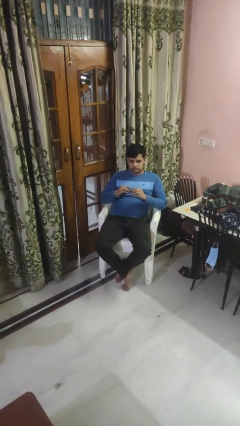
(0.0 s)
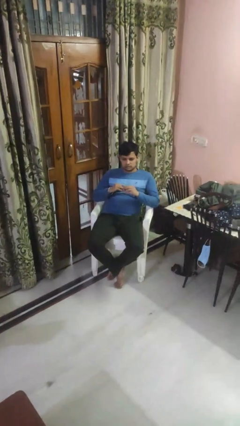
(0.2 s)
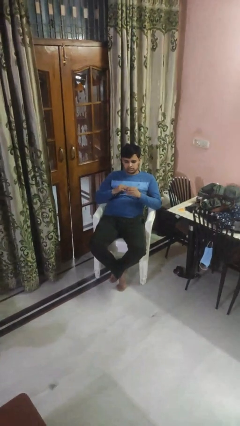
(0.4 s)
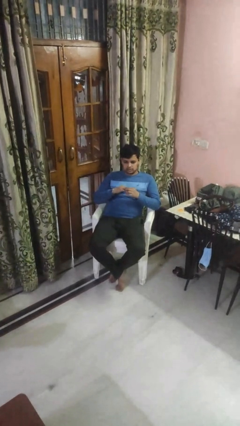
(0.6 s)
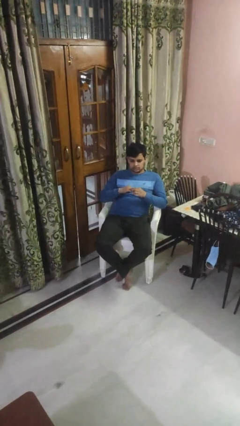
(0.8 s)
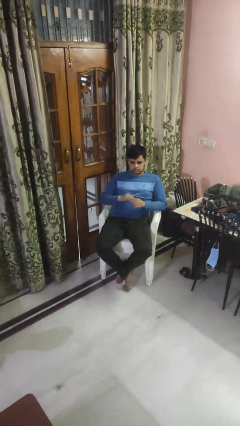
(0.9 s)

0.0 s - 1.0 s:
person puts on ring

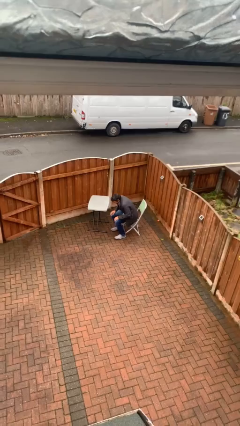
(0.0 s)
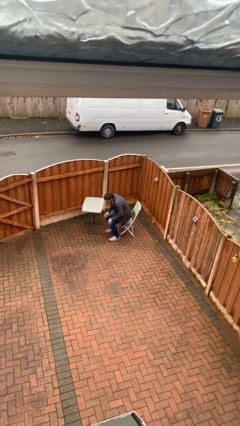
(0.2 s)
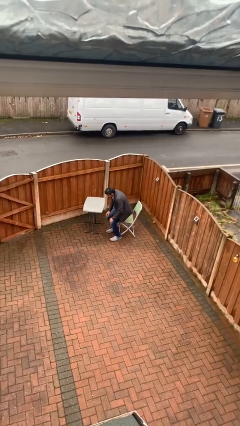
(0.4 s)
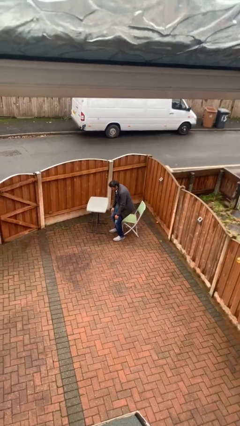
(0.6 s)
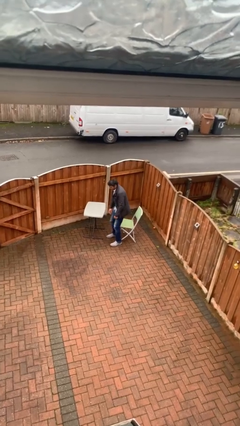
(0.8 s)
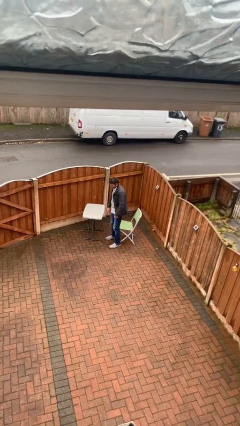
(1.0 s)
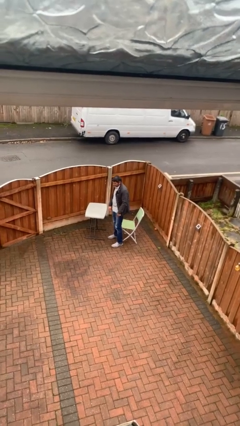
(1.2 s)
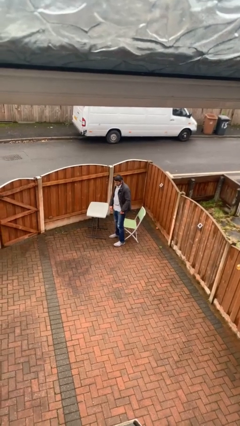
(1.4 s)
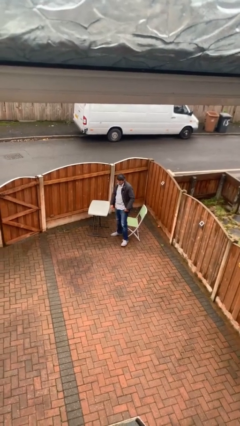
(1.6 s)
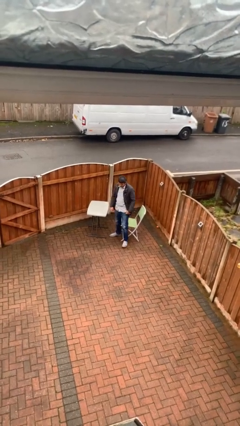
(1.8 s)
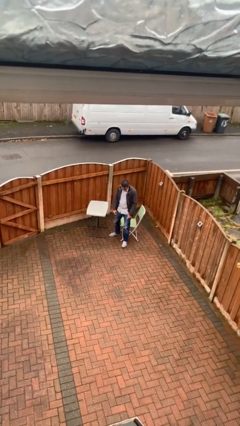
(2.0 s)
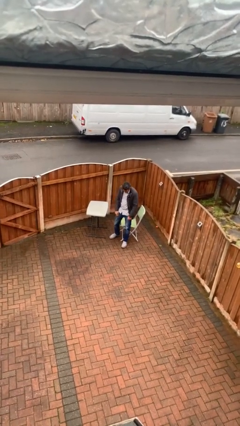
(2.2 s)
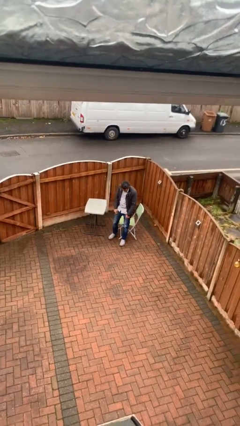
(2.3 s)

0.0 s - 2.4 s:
person stands up

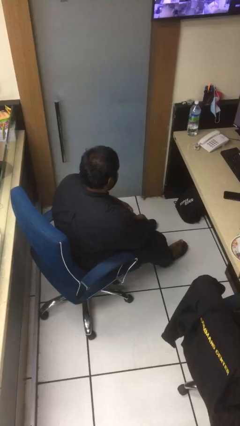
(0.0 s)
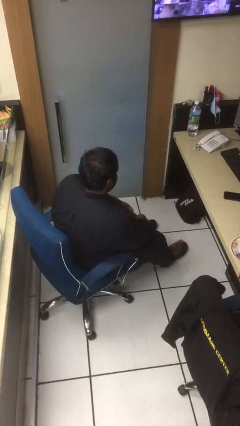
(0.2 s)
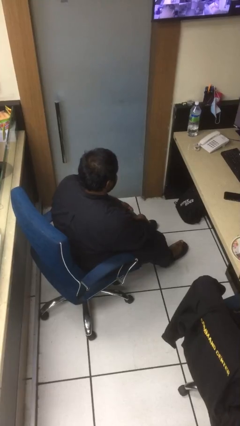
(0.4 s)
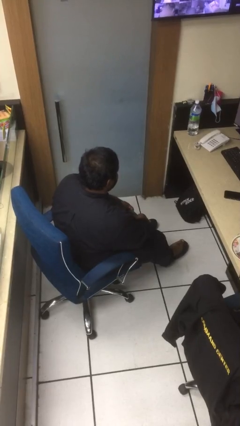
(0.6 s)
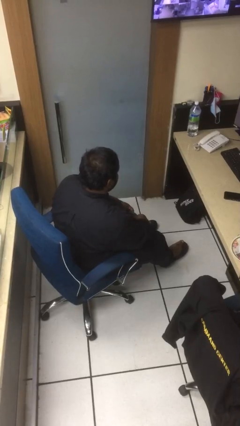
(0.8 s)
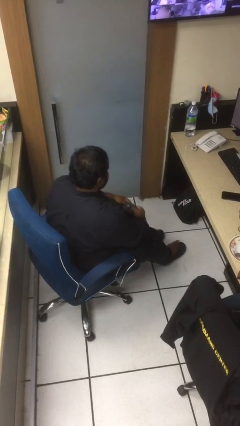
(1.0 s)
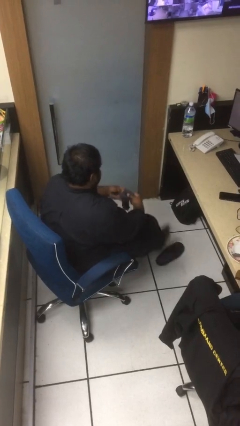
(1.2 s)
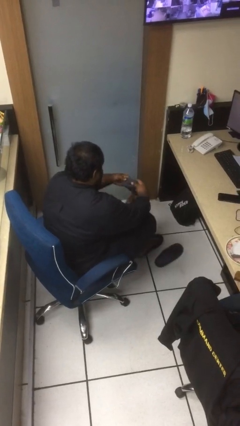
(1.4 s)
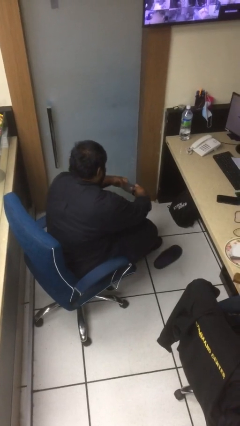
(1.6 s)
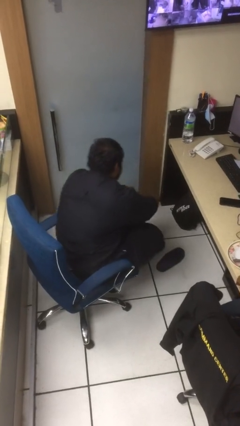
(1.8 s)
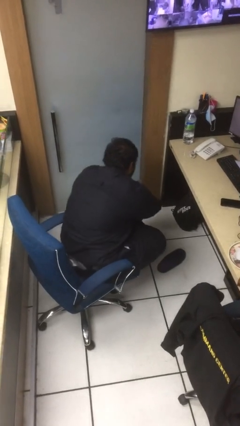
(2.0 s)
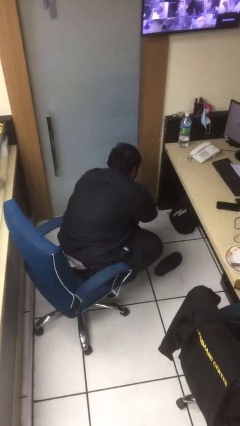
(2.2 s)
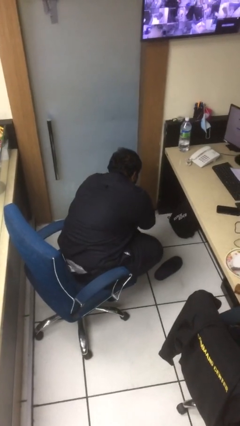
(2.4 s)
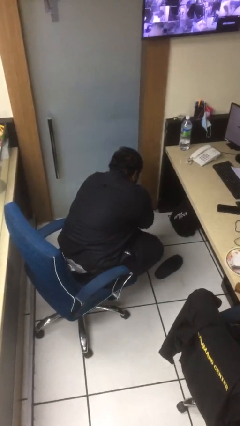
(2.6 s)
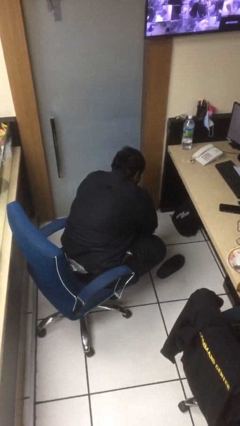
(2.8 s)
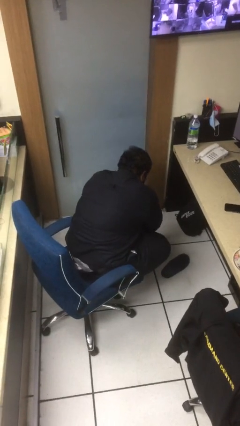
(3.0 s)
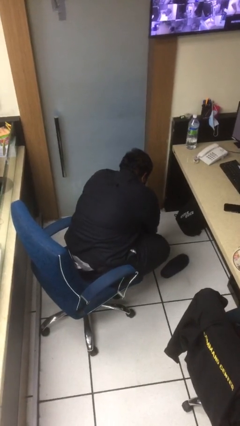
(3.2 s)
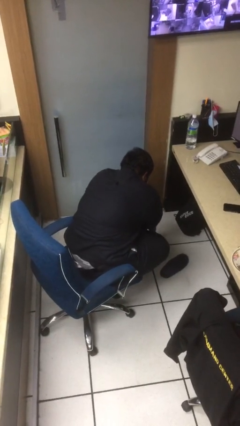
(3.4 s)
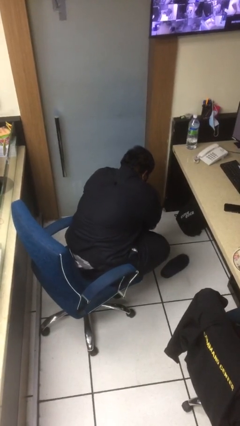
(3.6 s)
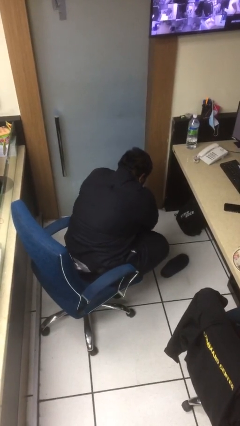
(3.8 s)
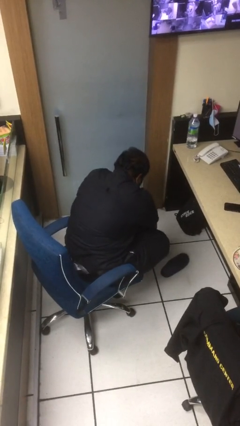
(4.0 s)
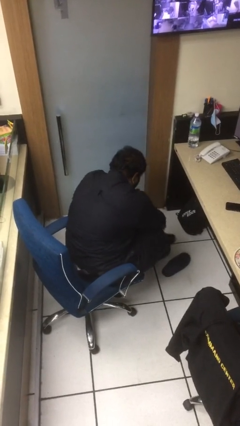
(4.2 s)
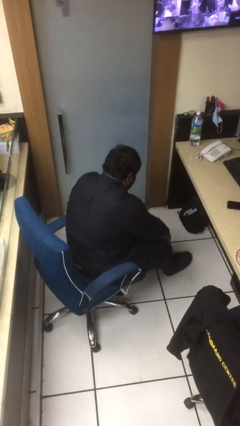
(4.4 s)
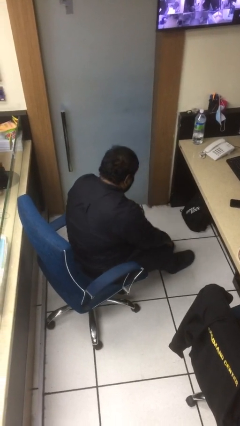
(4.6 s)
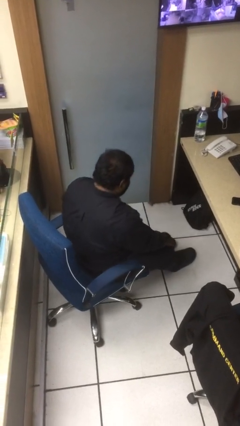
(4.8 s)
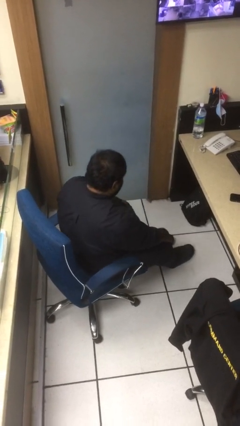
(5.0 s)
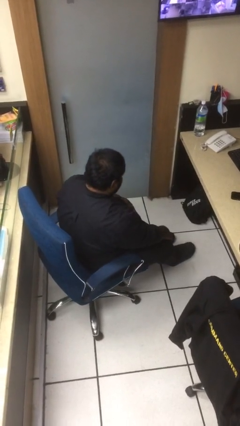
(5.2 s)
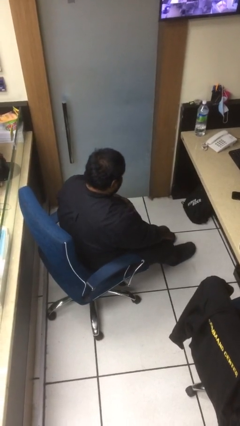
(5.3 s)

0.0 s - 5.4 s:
person puts on socks

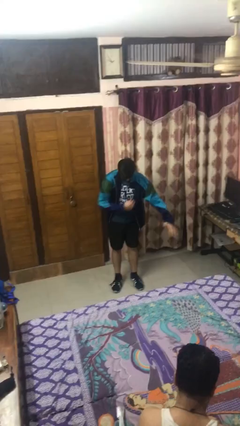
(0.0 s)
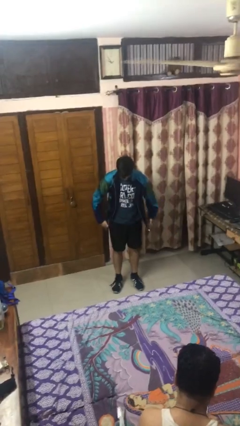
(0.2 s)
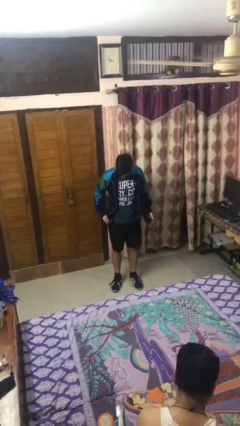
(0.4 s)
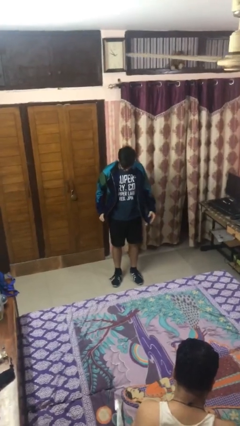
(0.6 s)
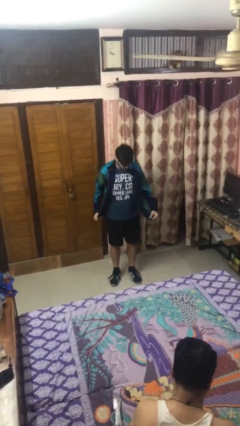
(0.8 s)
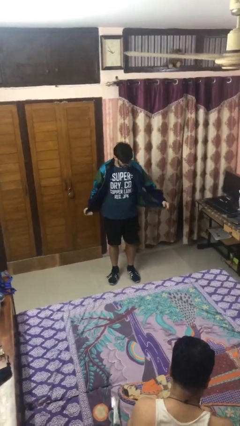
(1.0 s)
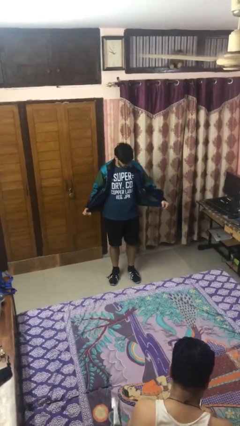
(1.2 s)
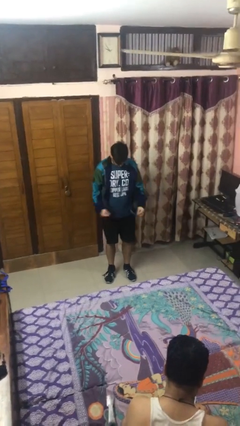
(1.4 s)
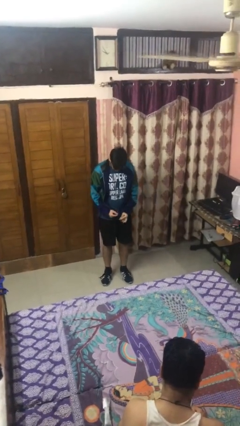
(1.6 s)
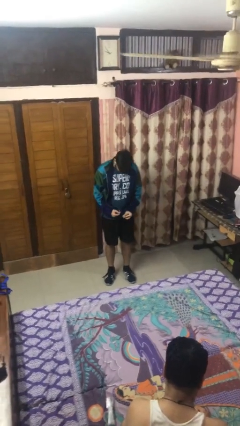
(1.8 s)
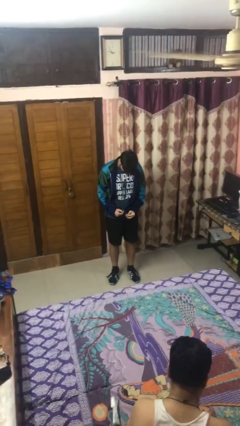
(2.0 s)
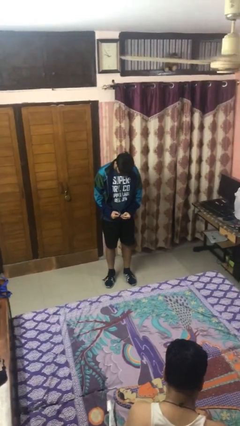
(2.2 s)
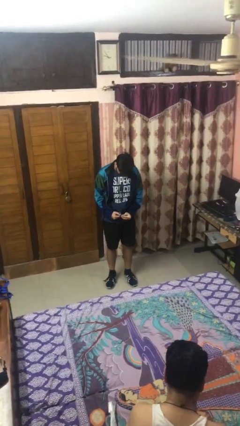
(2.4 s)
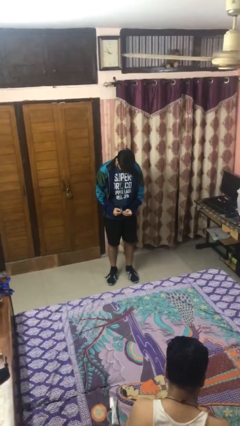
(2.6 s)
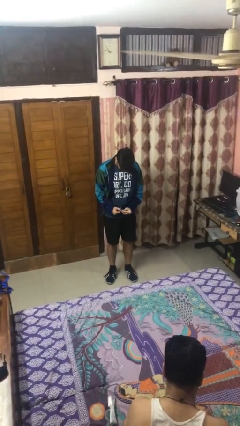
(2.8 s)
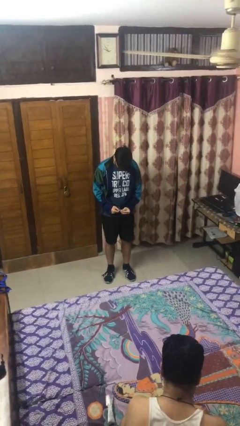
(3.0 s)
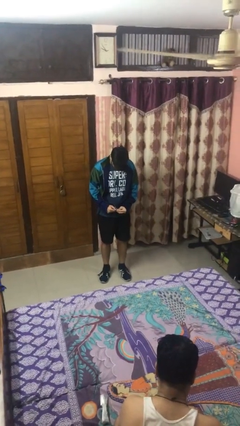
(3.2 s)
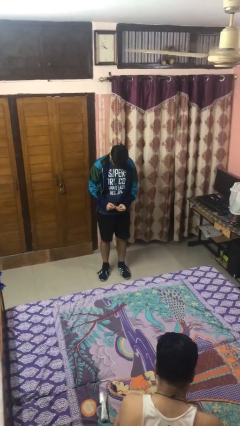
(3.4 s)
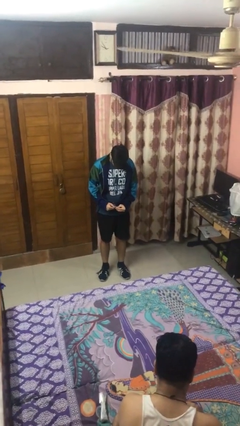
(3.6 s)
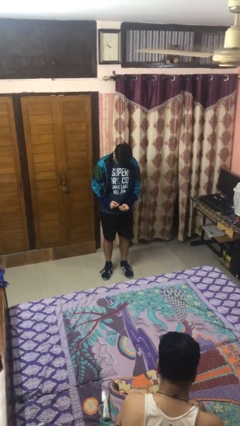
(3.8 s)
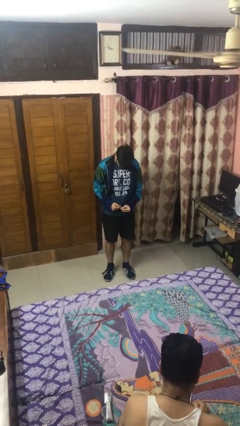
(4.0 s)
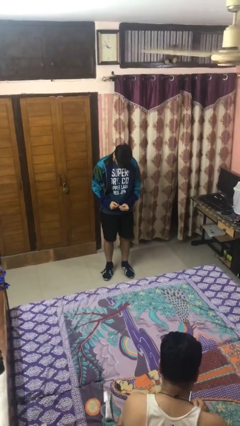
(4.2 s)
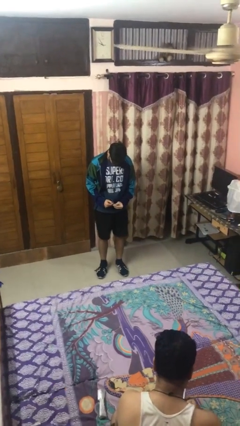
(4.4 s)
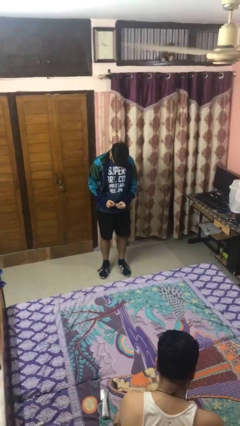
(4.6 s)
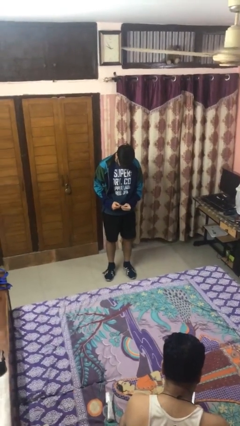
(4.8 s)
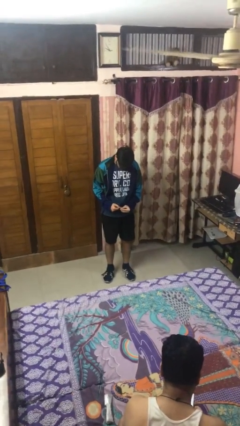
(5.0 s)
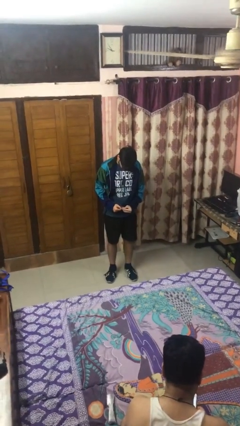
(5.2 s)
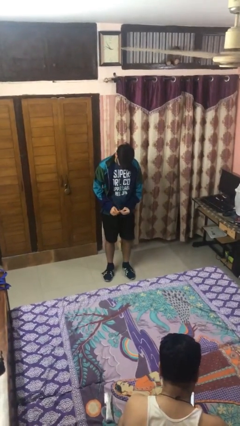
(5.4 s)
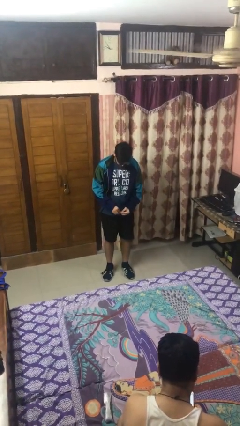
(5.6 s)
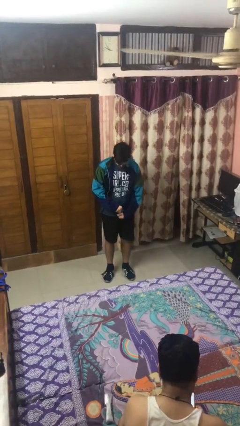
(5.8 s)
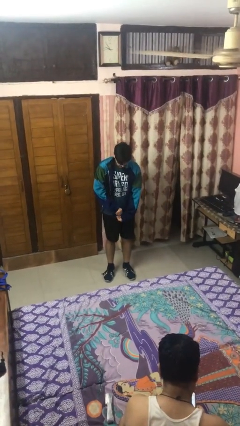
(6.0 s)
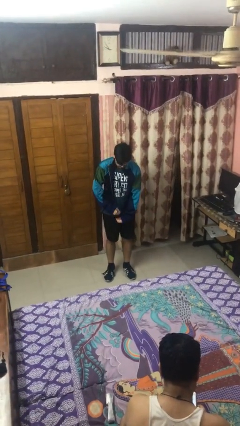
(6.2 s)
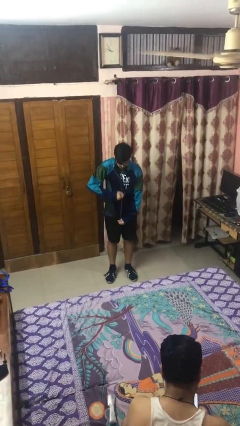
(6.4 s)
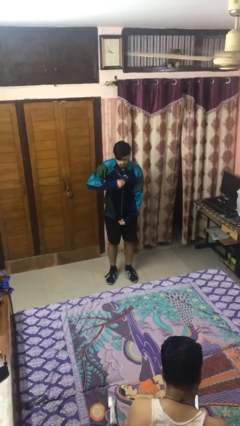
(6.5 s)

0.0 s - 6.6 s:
person zips up jacket

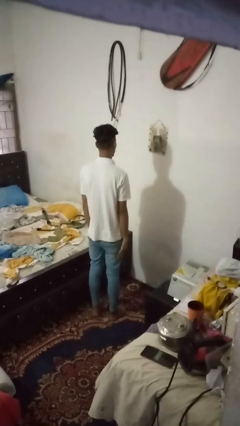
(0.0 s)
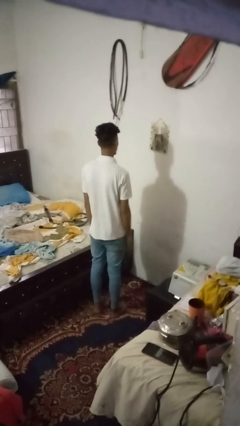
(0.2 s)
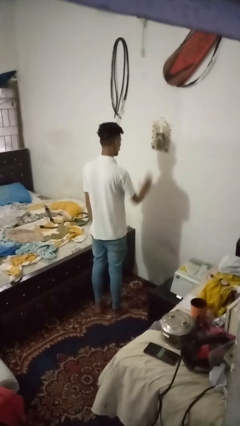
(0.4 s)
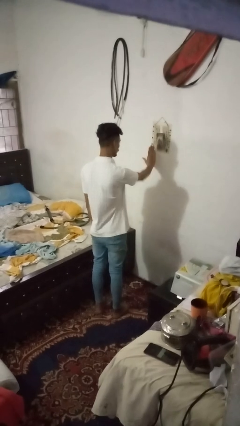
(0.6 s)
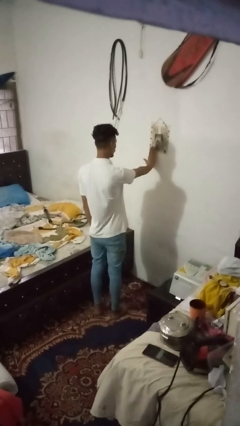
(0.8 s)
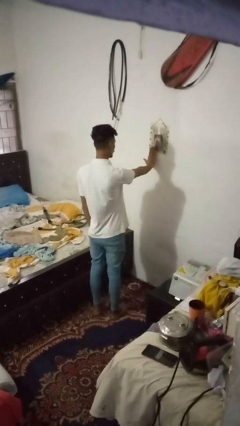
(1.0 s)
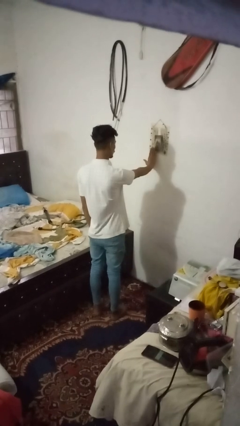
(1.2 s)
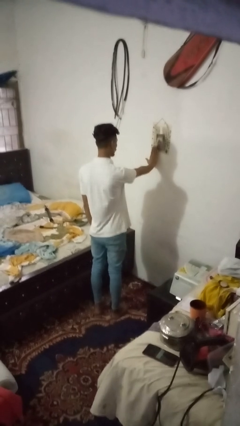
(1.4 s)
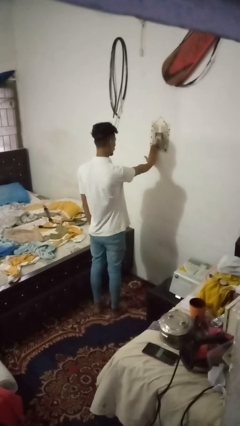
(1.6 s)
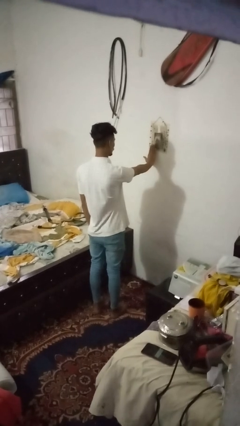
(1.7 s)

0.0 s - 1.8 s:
person gestures stop

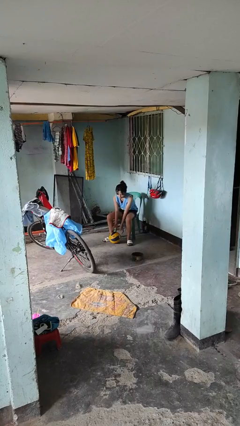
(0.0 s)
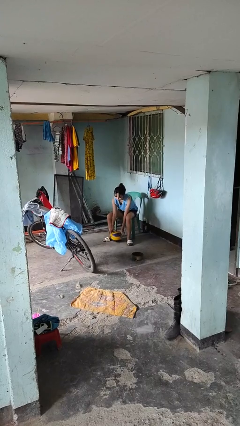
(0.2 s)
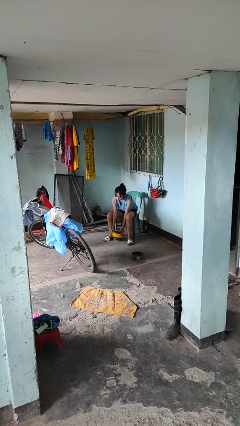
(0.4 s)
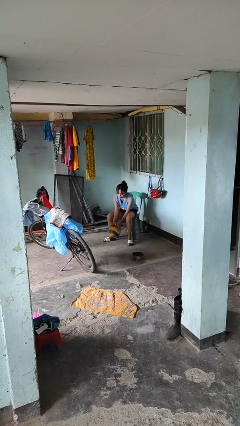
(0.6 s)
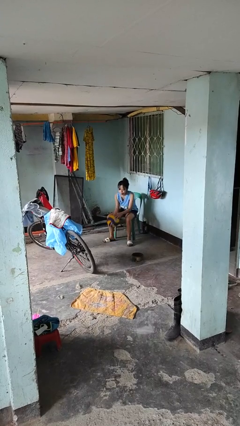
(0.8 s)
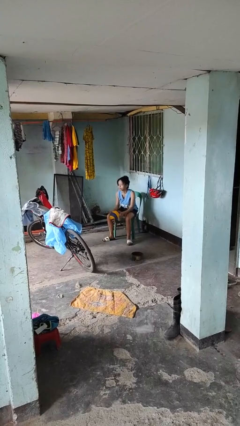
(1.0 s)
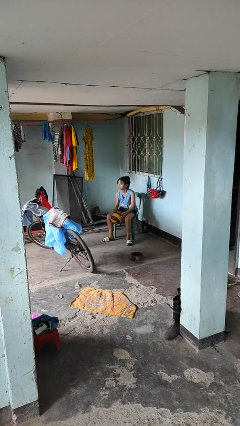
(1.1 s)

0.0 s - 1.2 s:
person picks up object from floor
